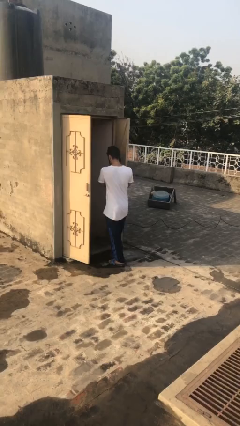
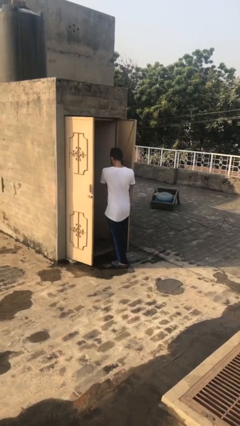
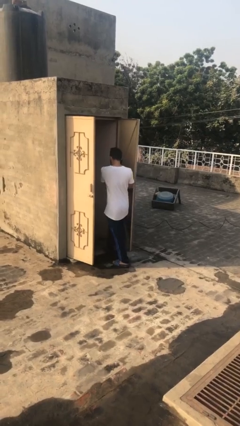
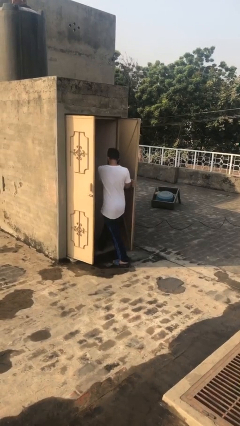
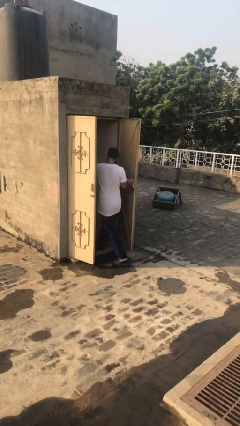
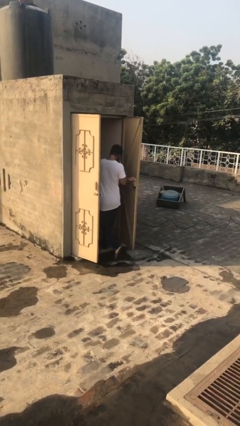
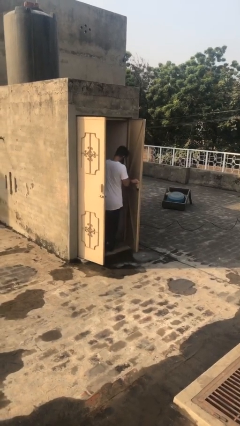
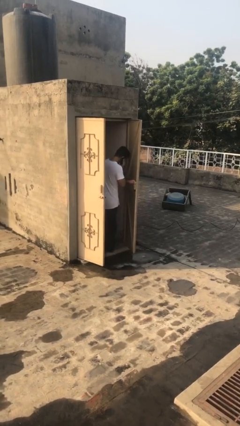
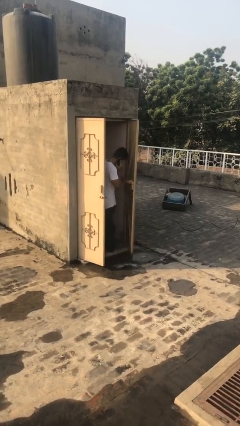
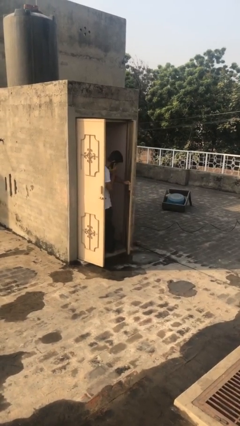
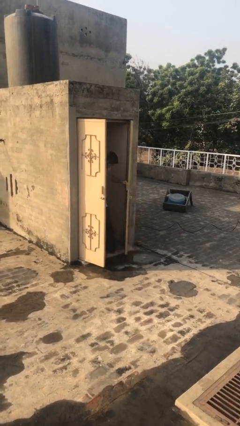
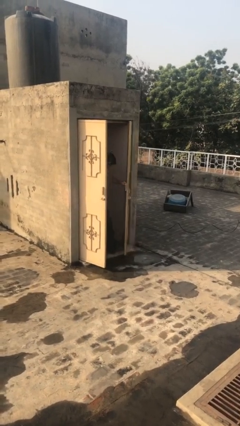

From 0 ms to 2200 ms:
person exits scene through structure

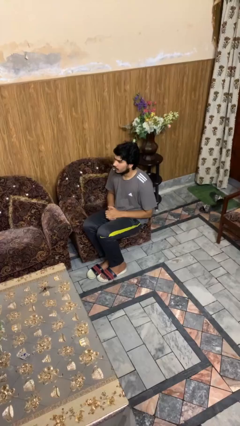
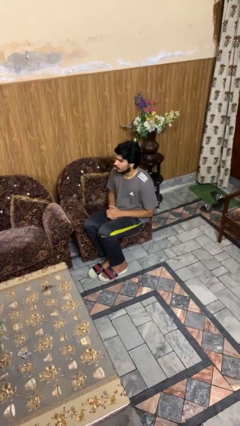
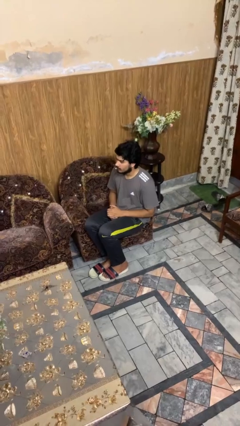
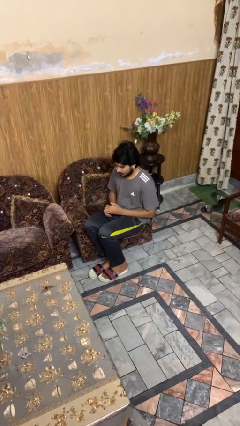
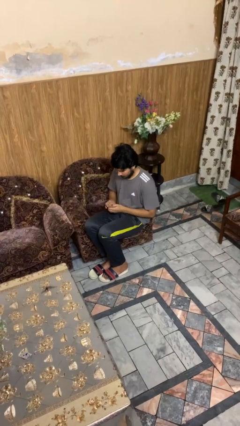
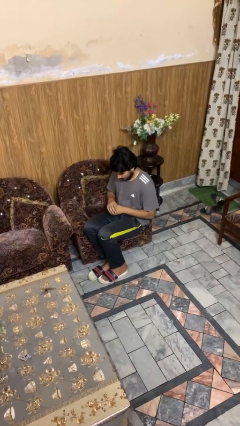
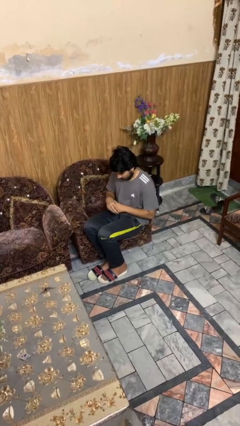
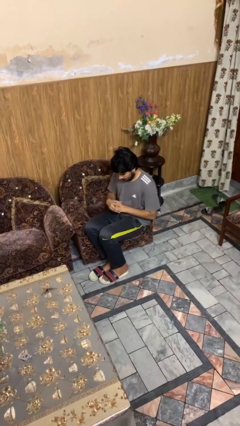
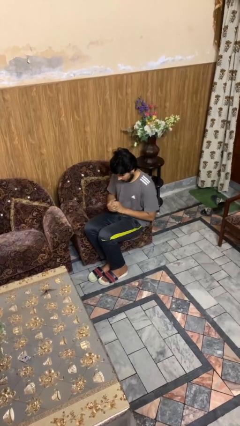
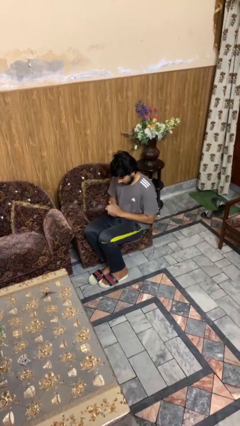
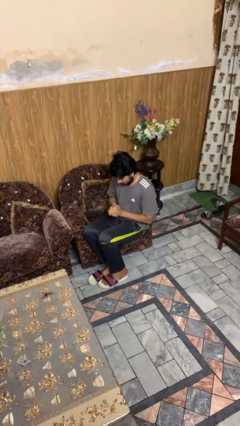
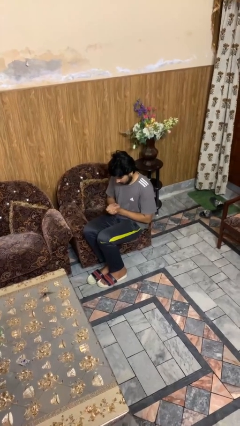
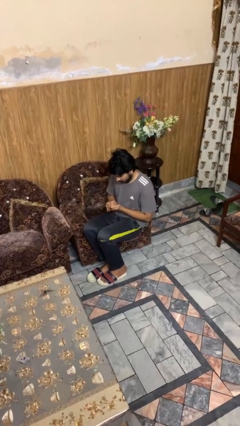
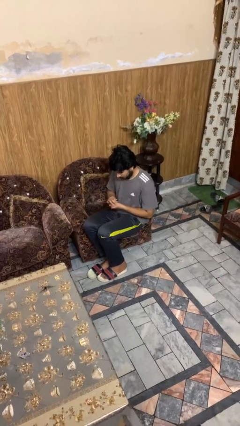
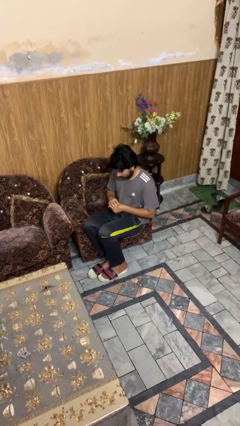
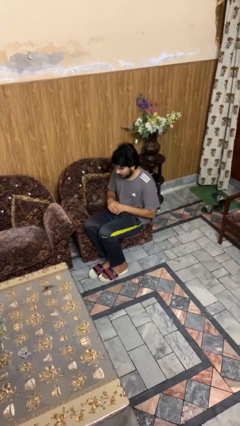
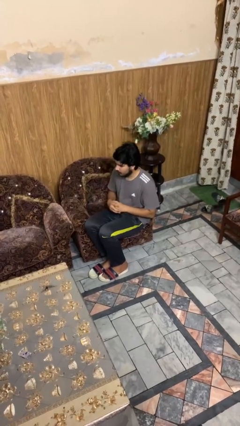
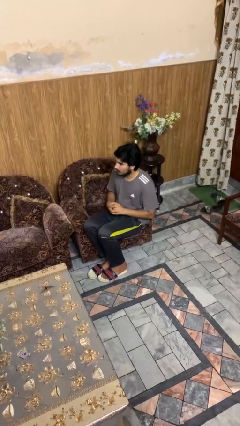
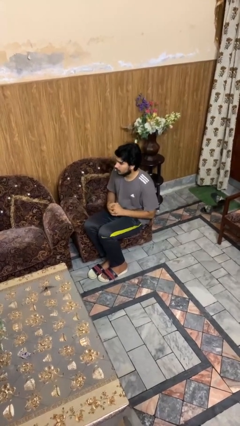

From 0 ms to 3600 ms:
person looks at hands in lap

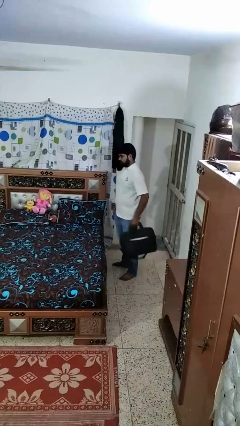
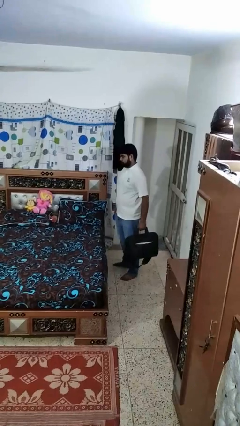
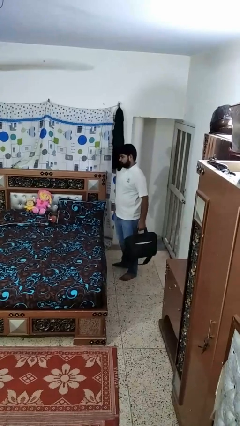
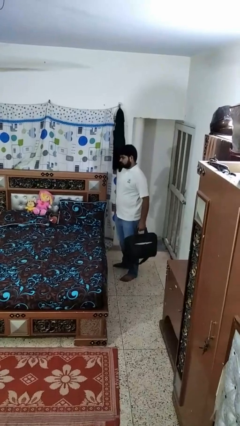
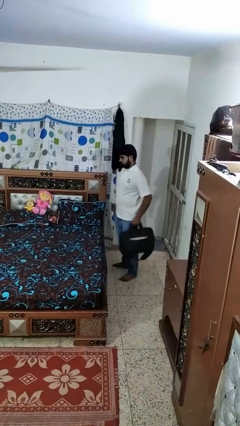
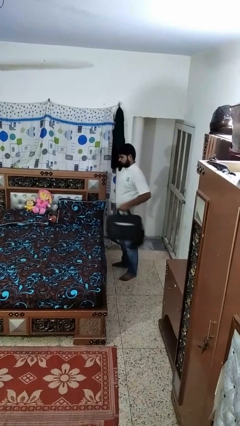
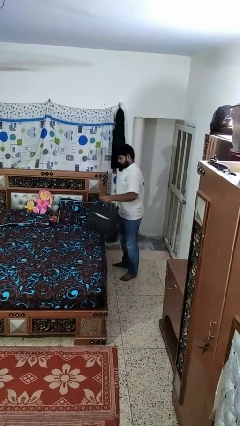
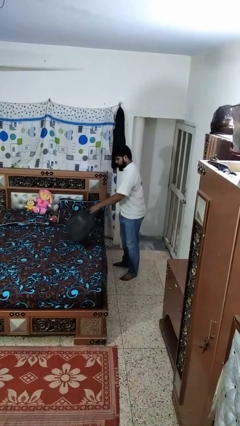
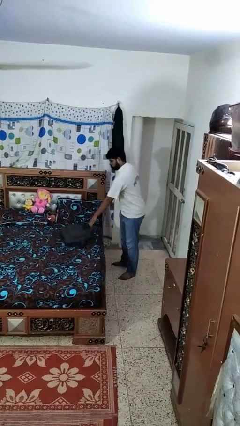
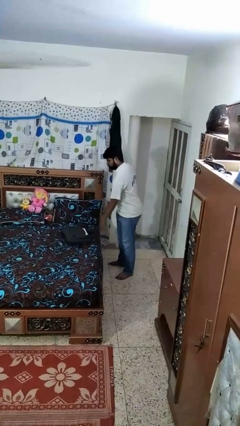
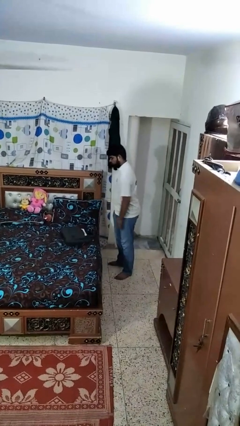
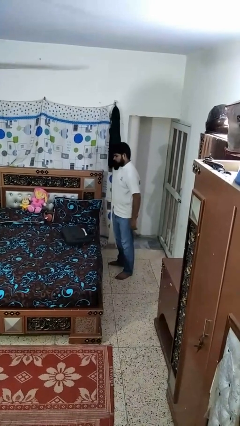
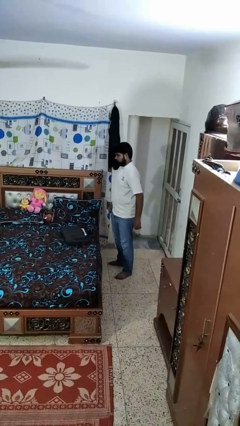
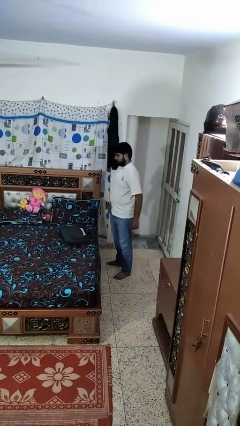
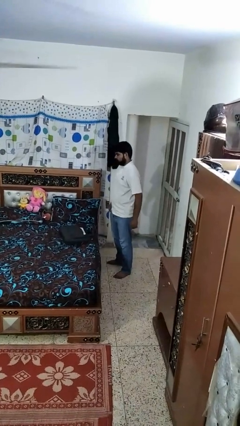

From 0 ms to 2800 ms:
person puts down object on bed

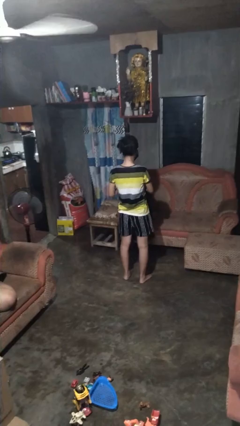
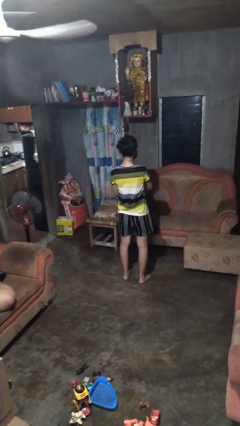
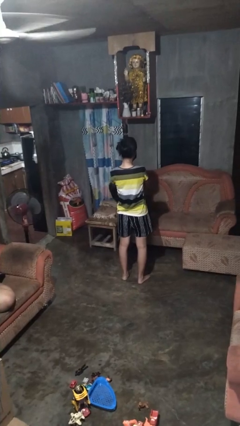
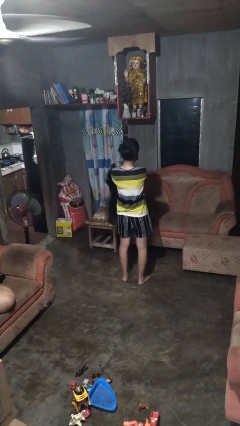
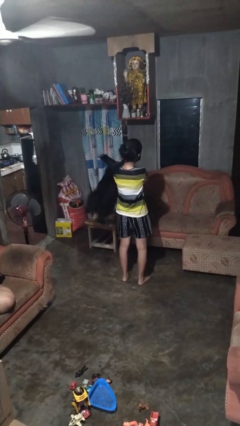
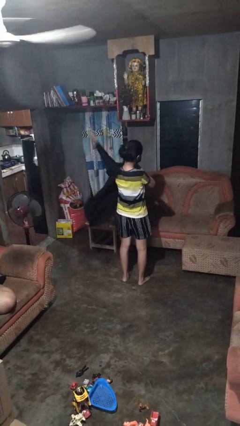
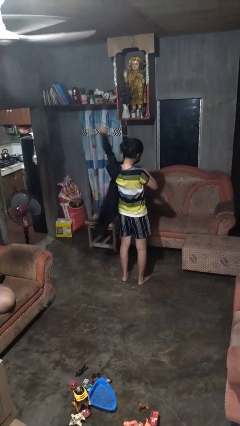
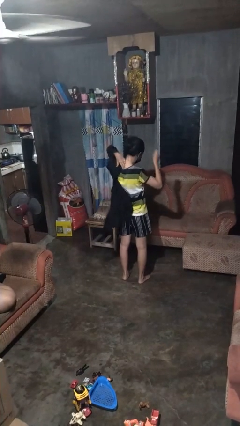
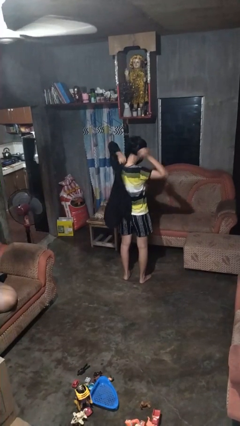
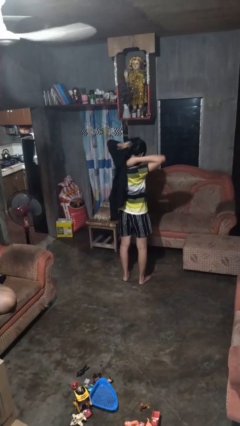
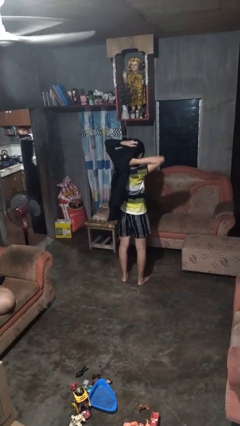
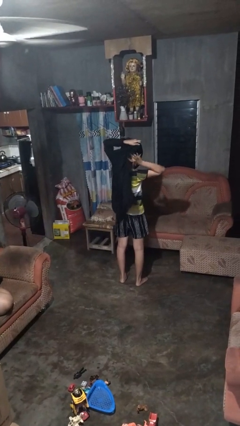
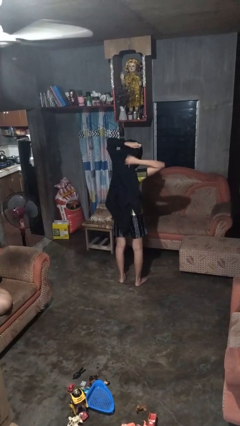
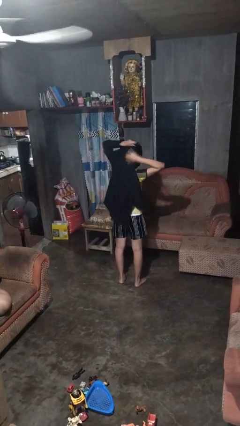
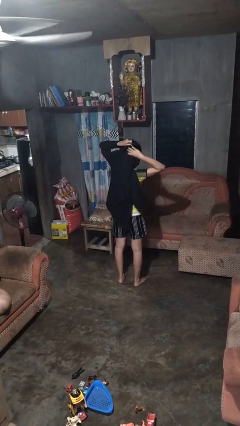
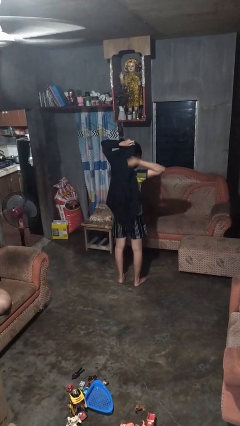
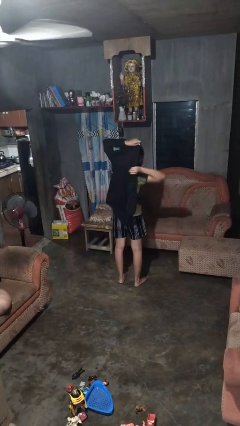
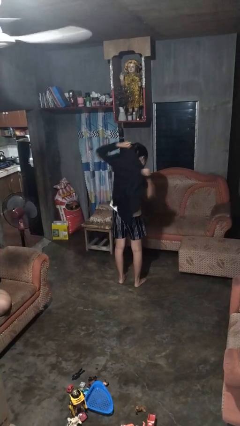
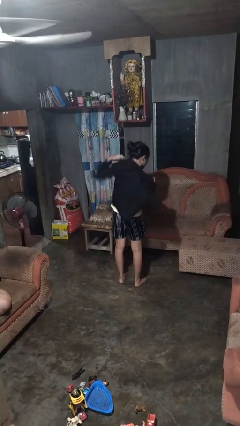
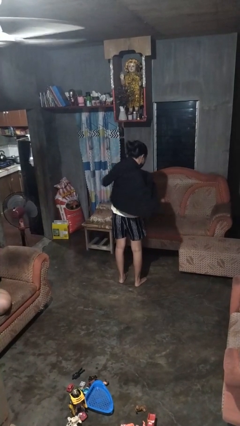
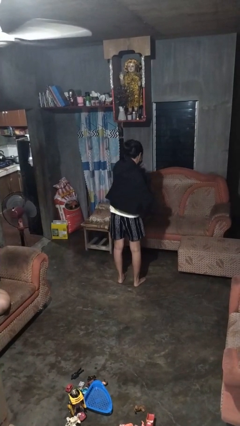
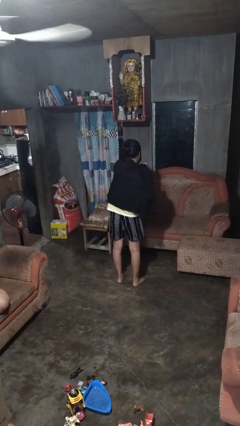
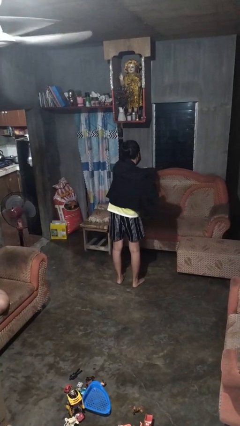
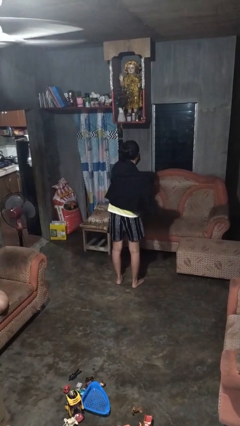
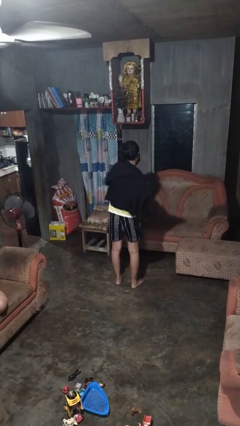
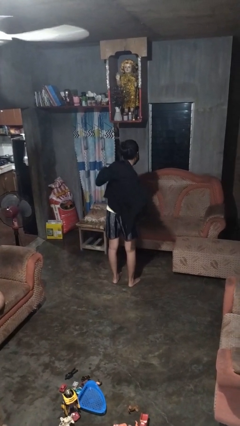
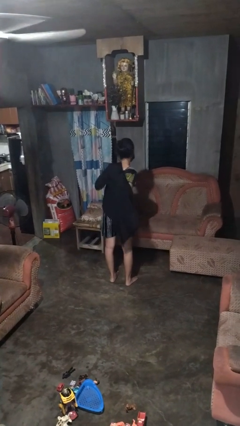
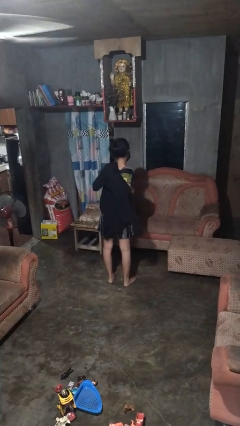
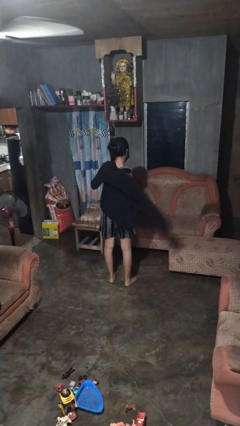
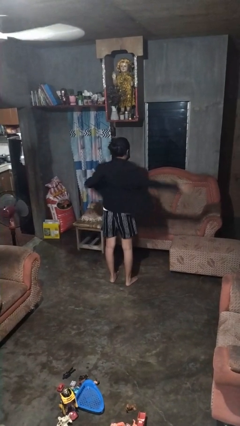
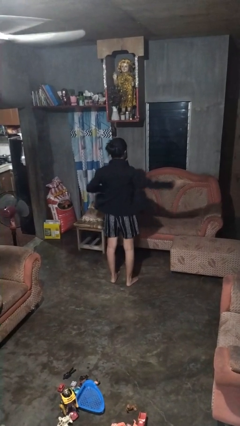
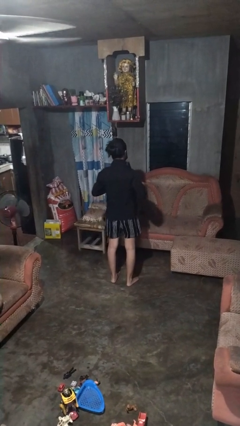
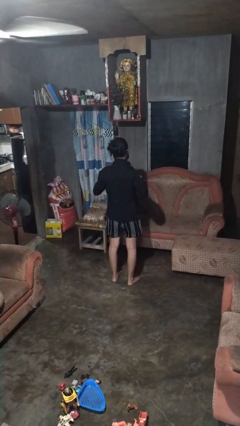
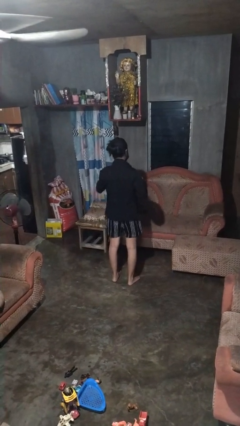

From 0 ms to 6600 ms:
person puts on shirt

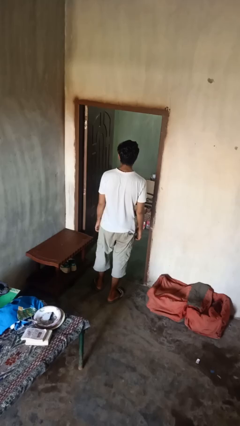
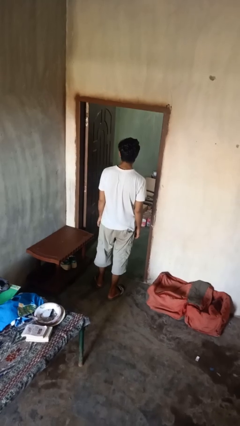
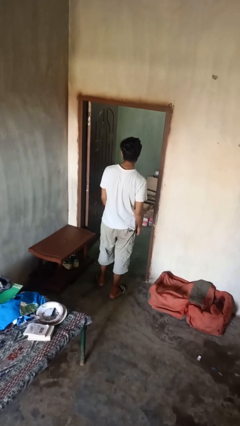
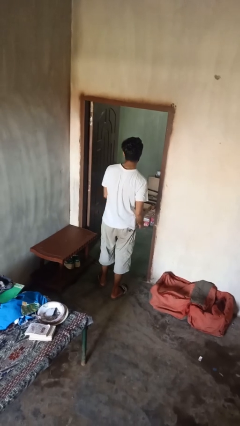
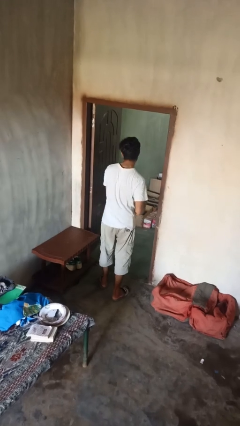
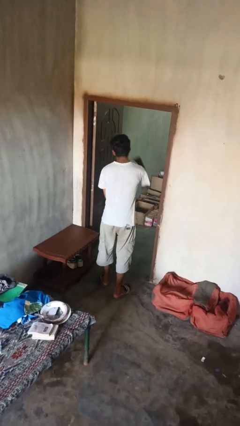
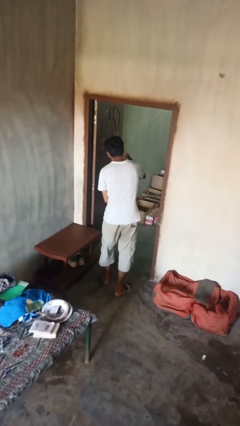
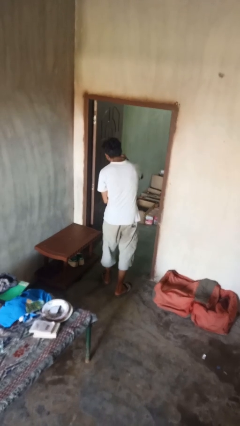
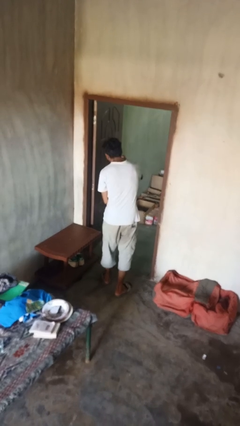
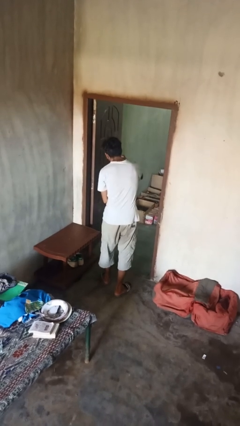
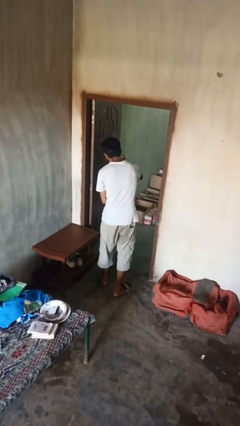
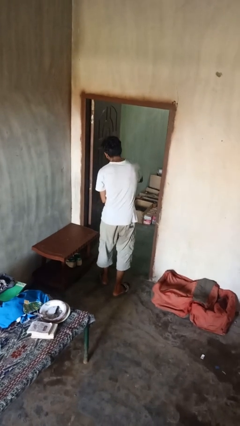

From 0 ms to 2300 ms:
person punches
